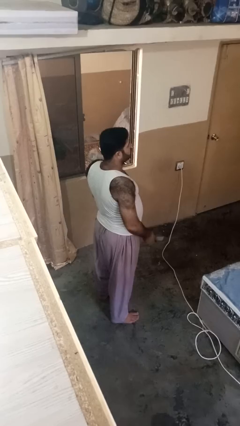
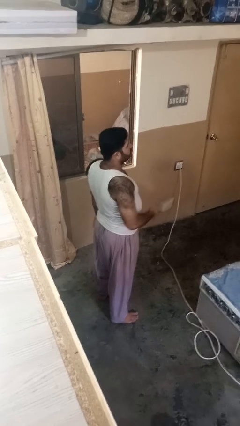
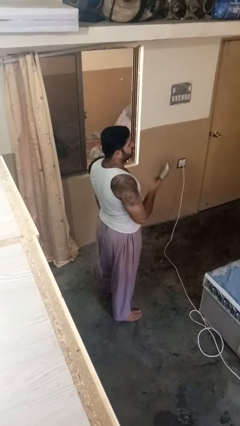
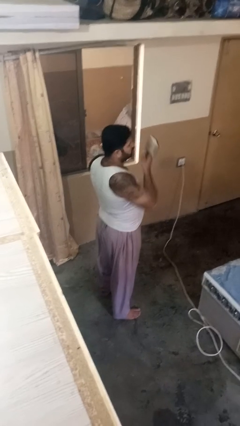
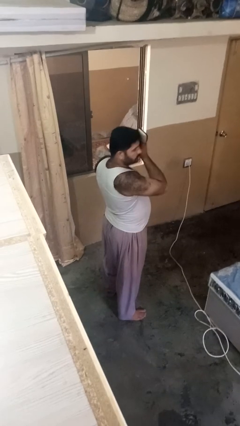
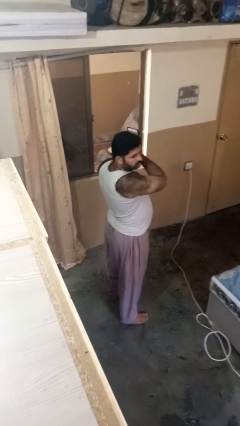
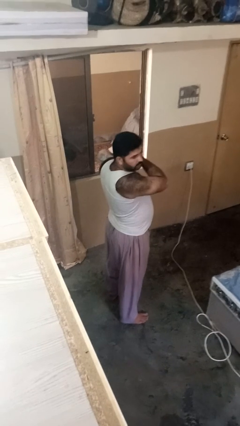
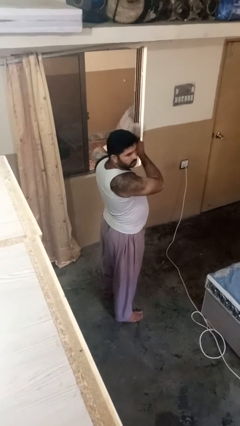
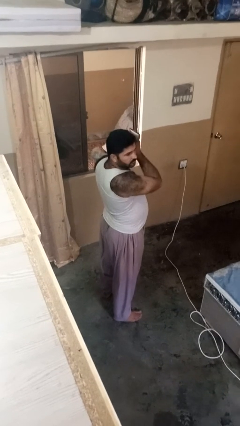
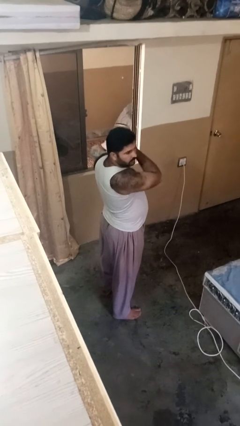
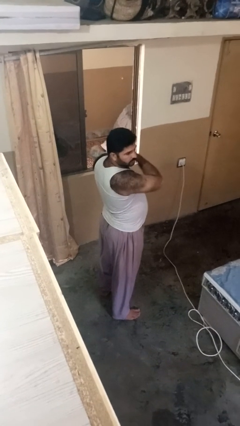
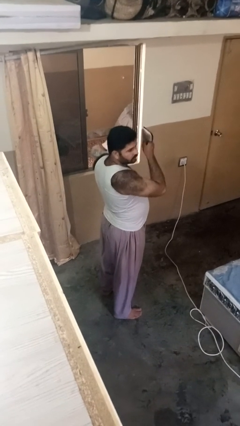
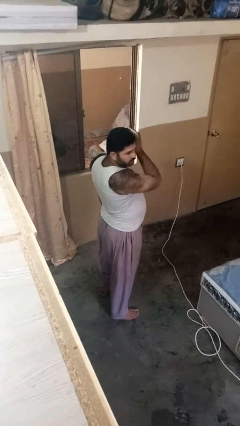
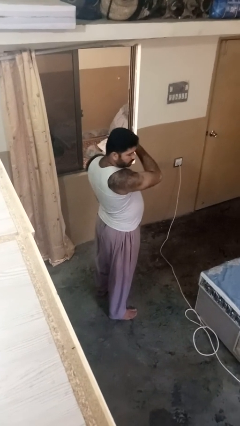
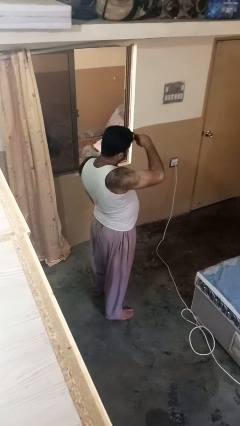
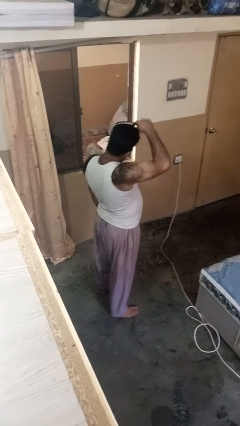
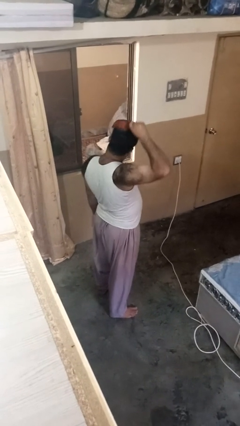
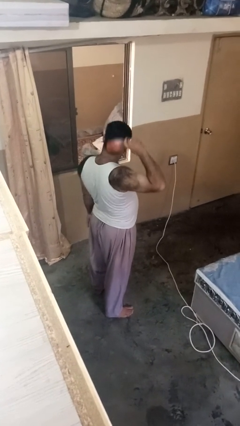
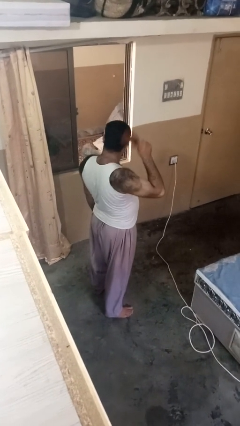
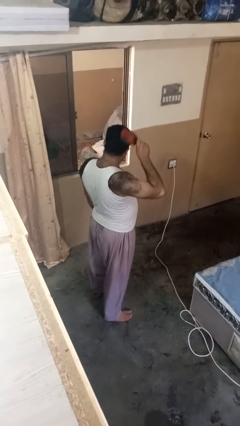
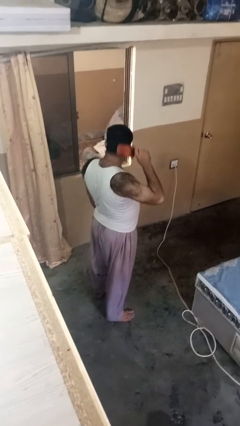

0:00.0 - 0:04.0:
person brushes hair

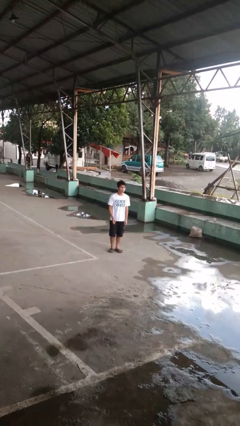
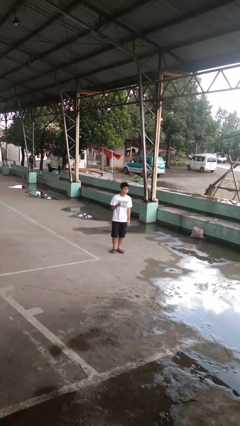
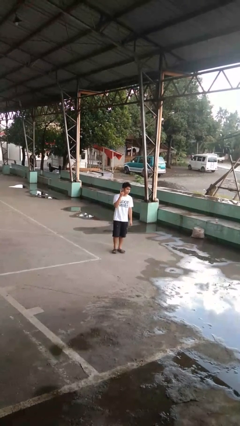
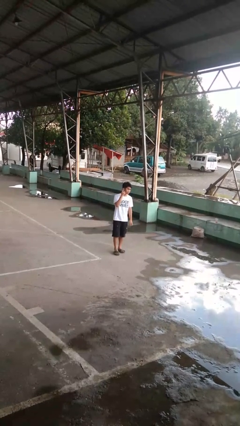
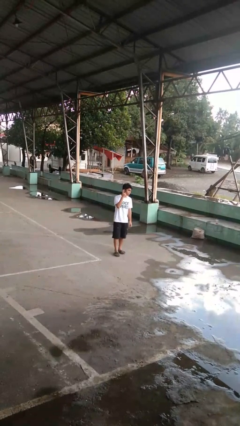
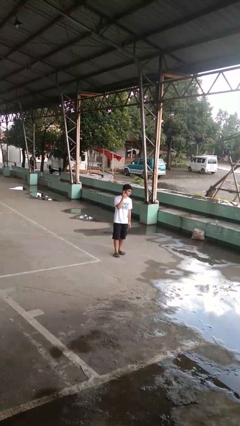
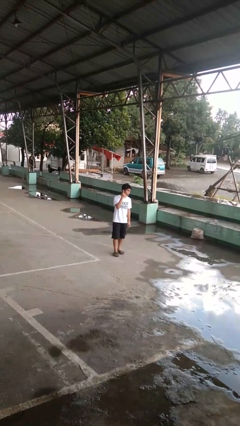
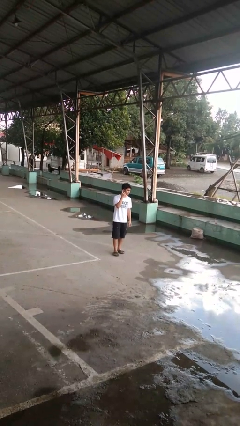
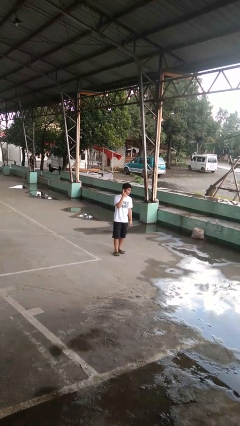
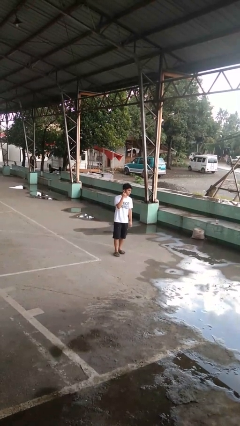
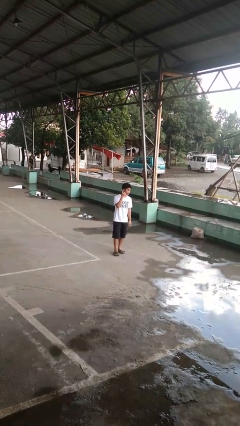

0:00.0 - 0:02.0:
person gestures listen closely

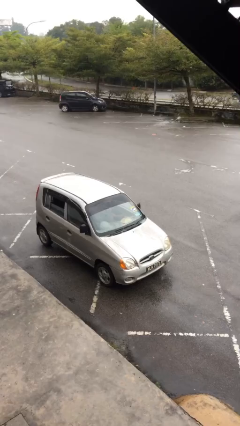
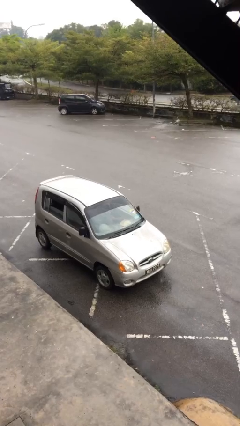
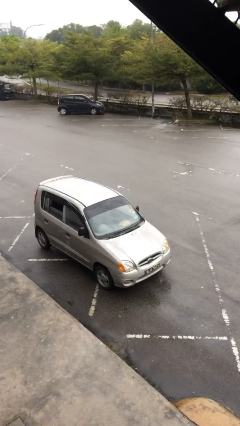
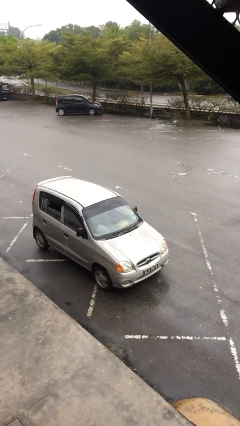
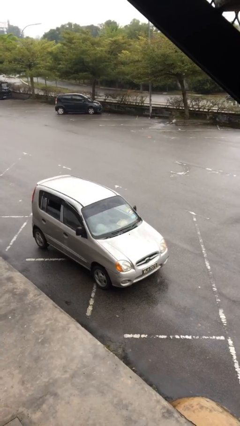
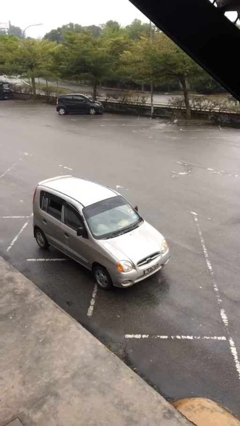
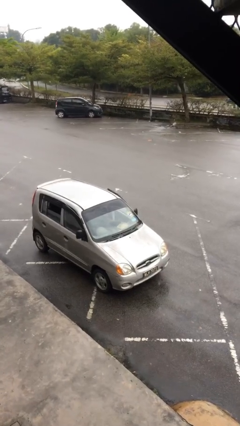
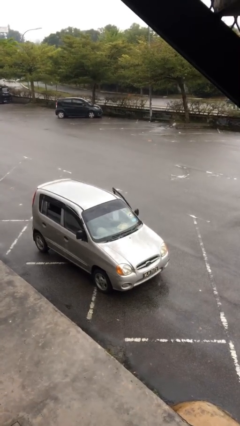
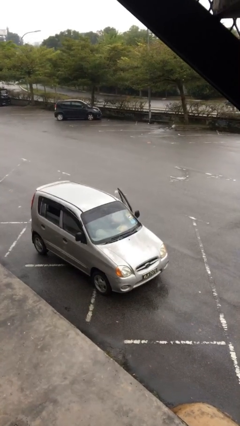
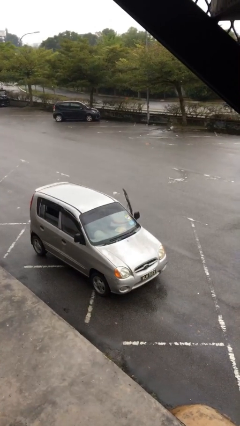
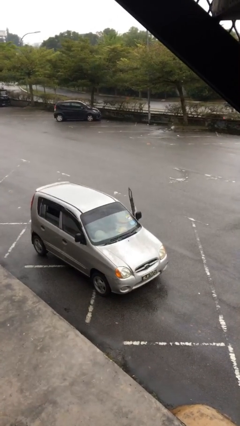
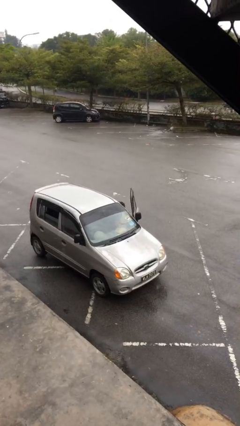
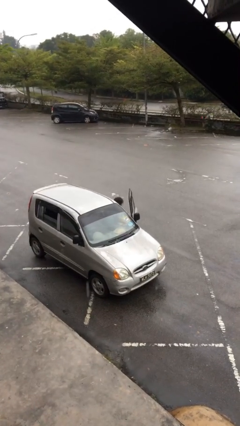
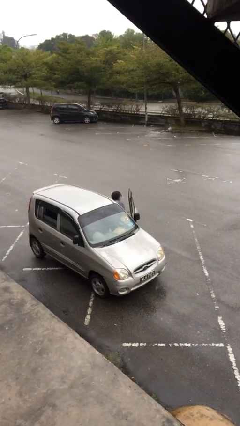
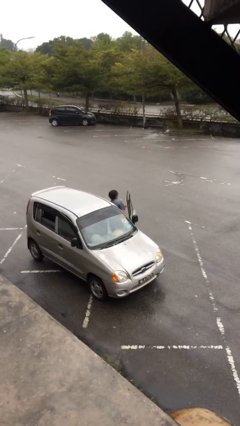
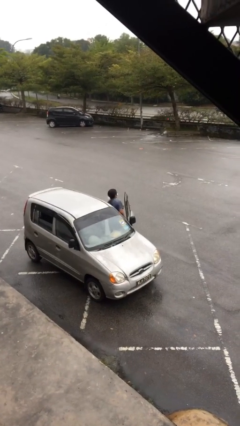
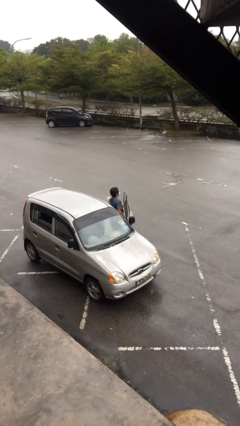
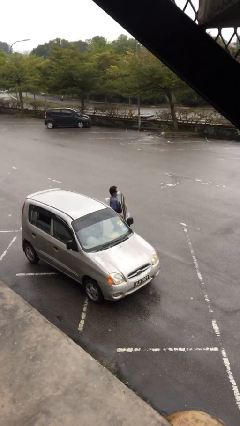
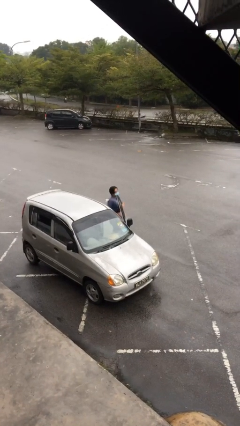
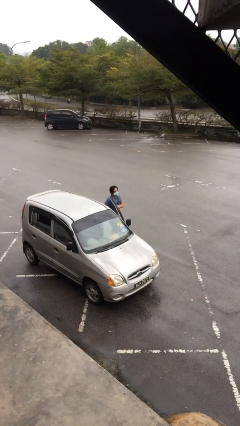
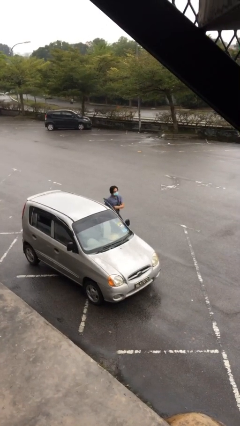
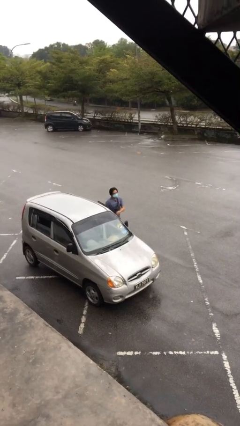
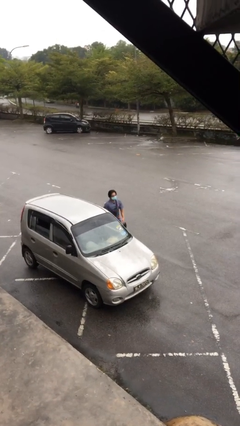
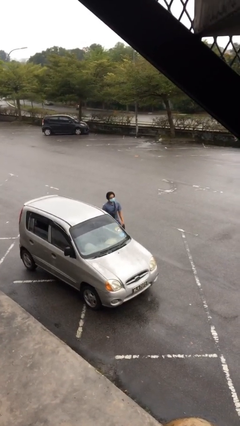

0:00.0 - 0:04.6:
person exits car

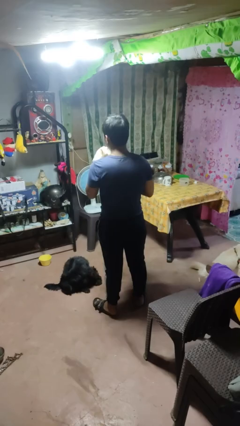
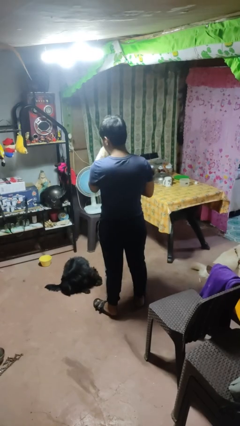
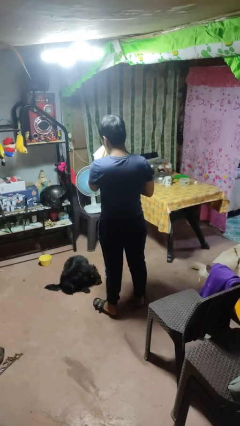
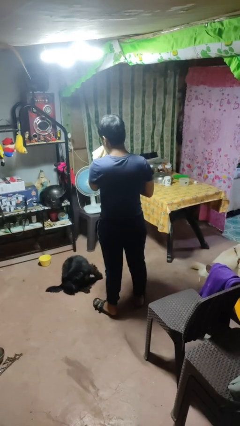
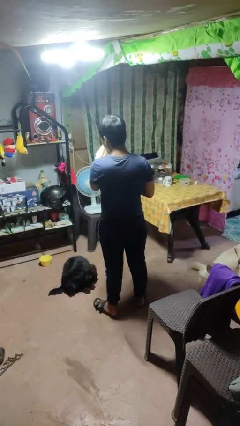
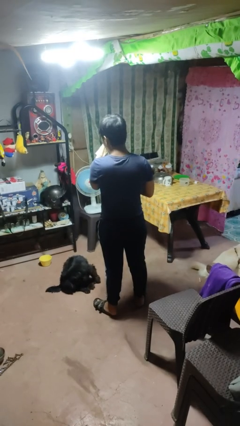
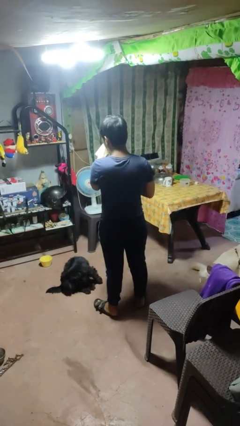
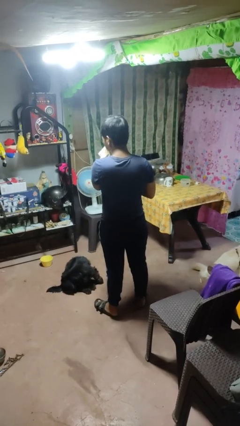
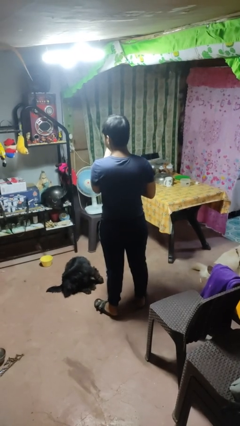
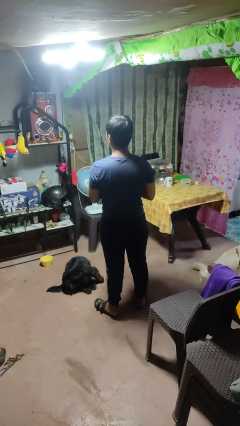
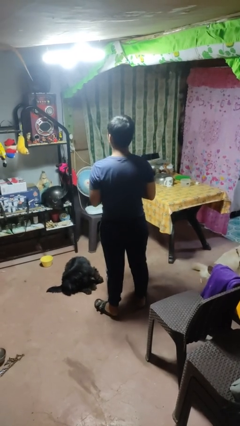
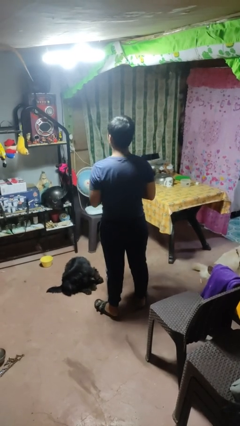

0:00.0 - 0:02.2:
person blows nose

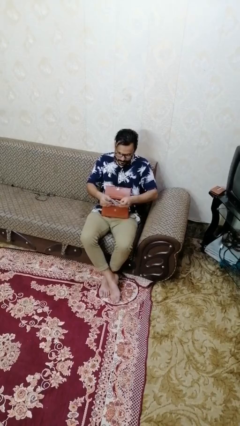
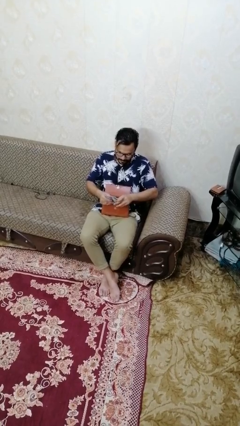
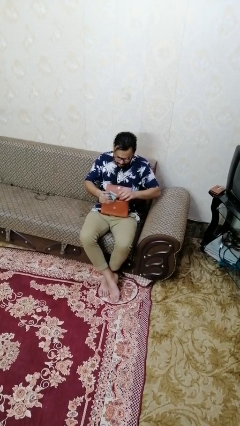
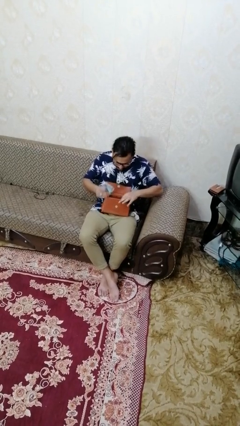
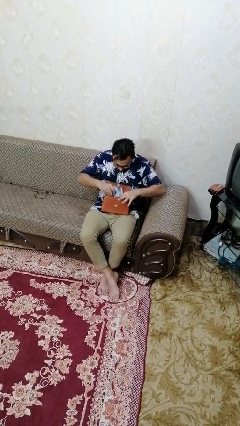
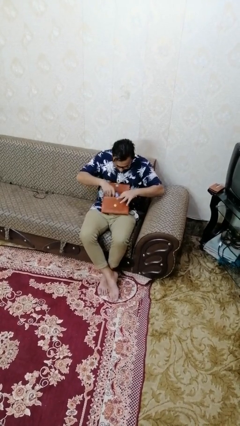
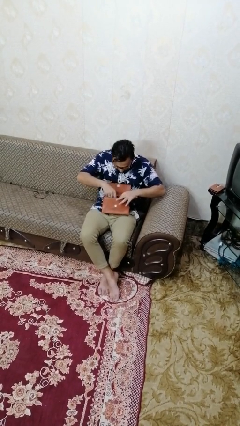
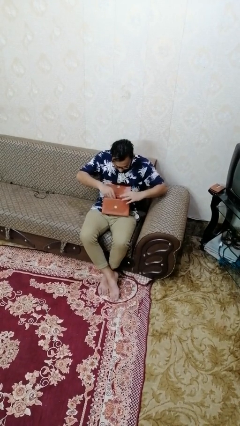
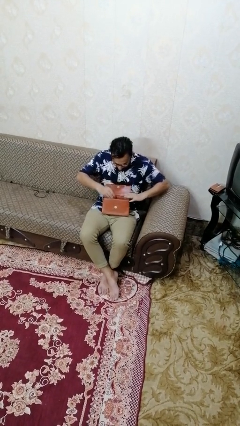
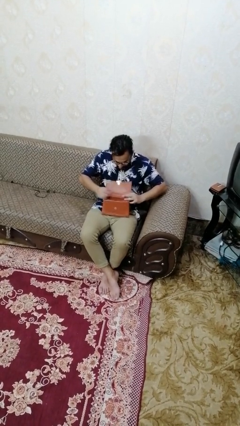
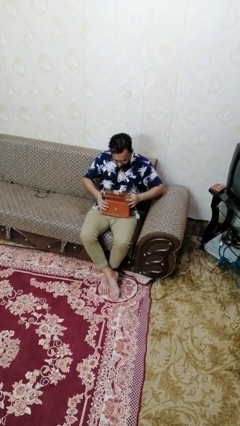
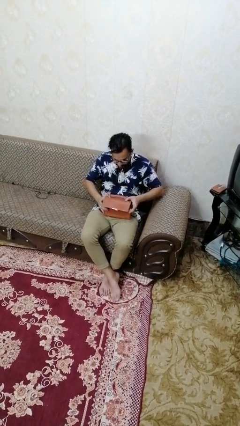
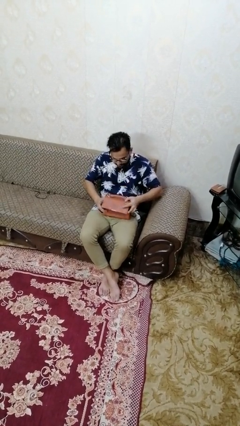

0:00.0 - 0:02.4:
person puts object into purse

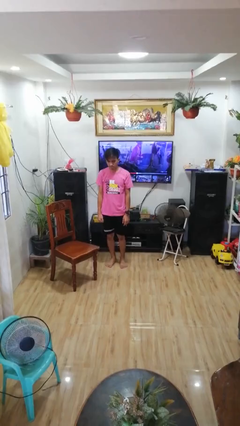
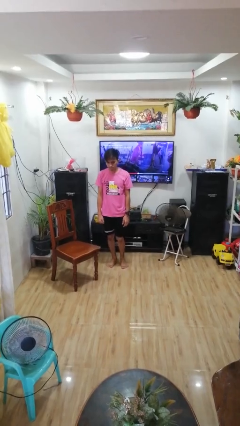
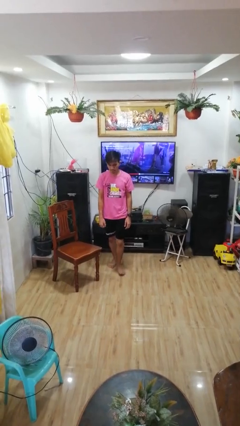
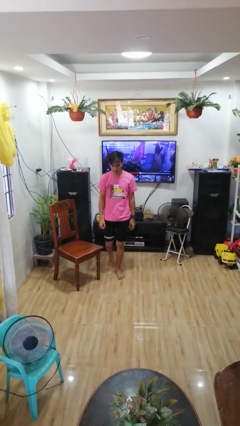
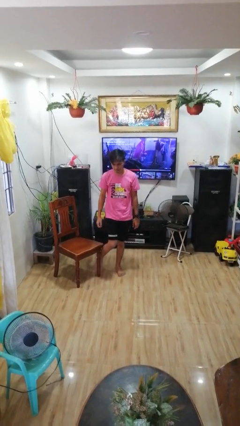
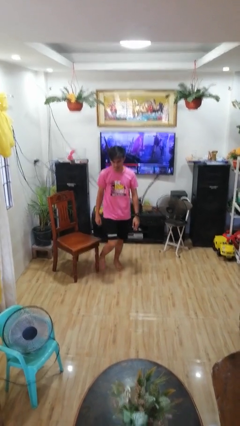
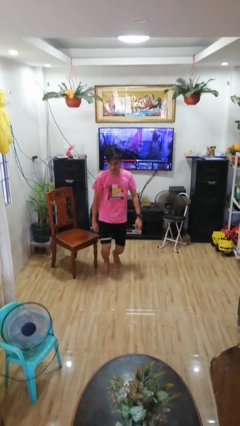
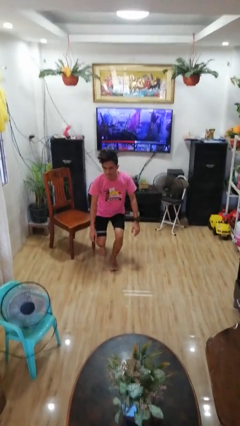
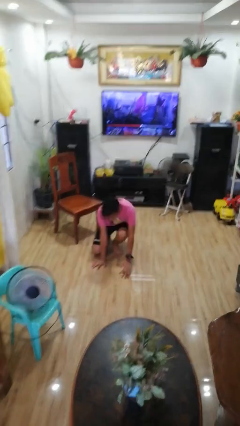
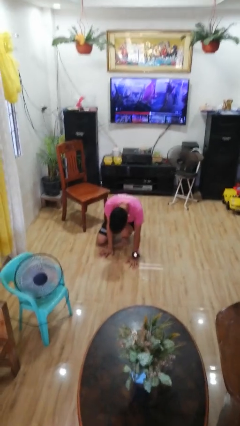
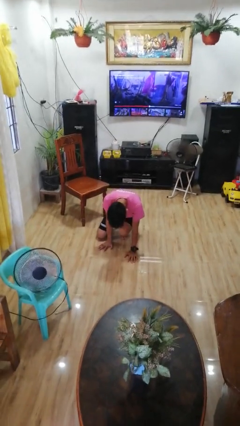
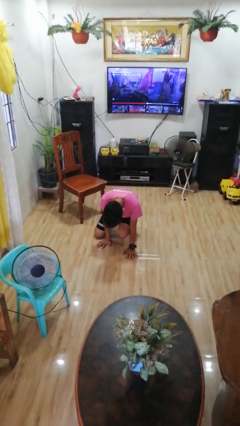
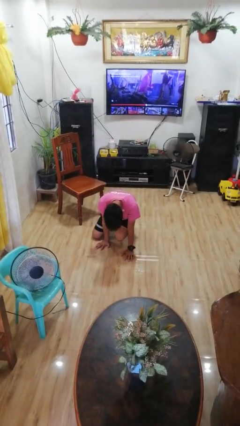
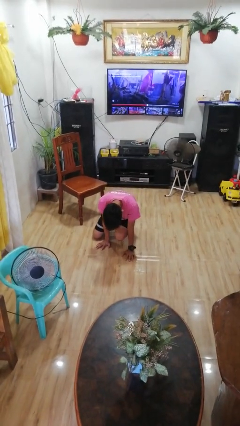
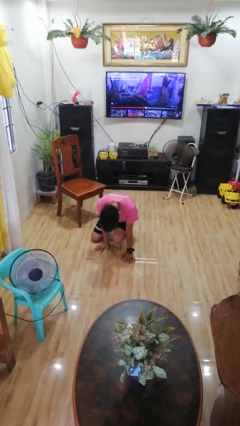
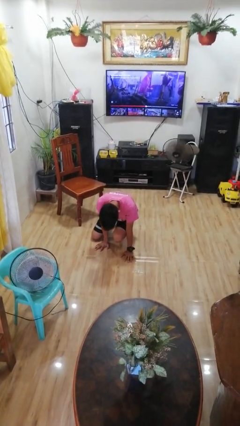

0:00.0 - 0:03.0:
person trips on object on floor
